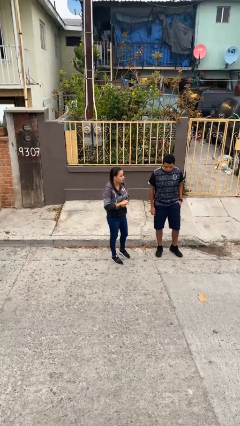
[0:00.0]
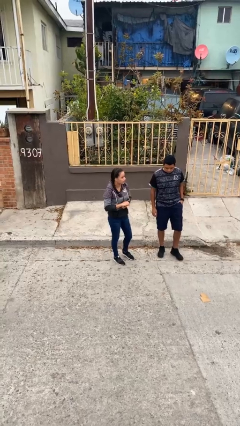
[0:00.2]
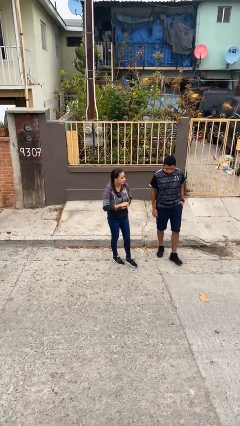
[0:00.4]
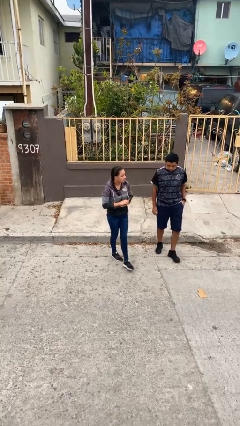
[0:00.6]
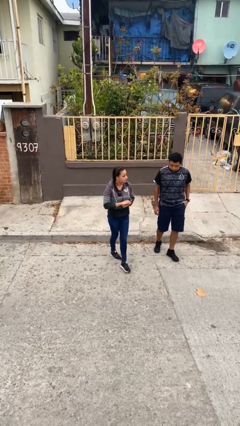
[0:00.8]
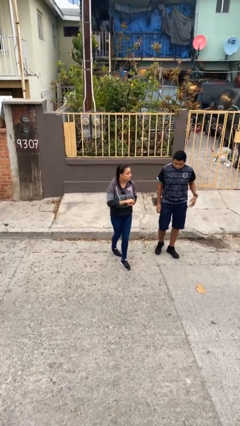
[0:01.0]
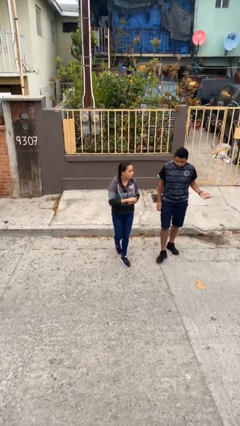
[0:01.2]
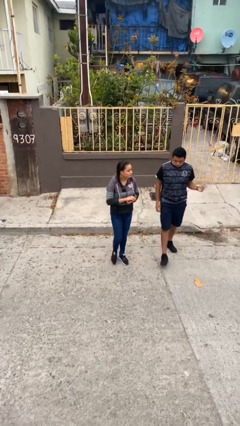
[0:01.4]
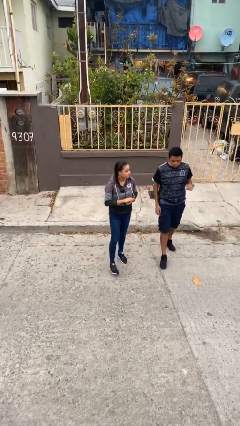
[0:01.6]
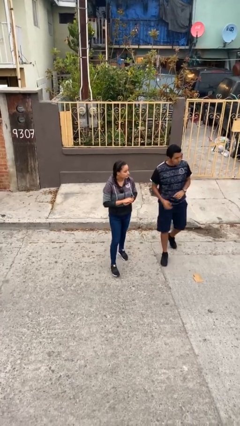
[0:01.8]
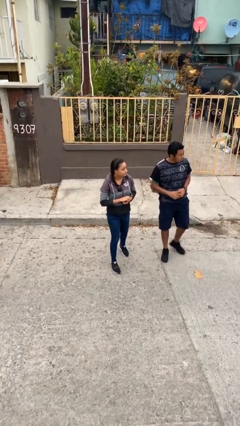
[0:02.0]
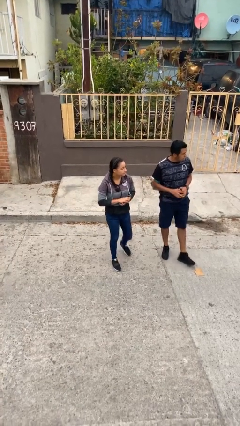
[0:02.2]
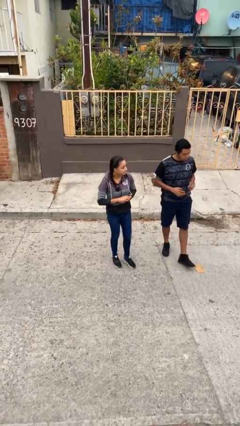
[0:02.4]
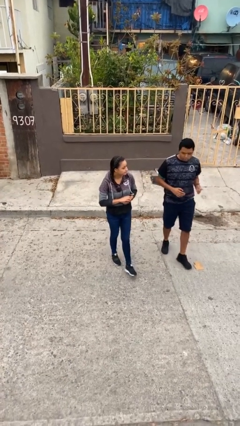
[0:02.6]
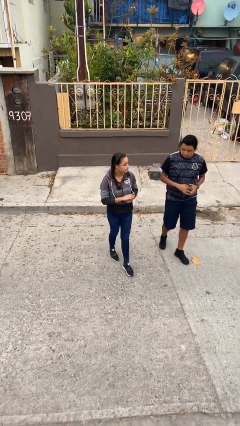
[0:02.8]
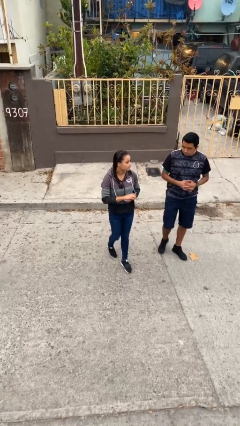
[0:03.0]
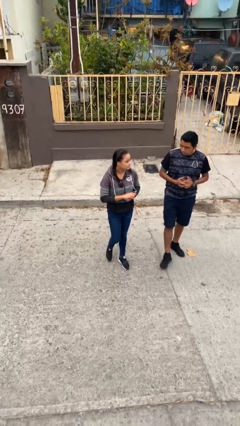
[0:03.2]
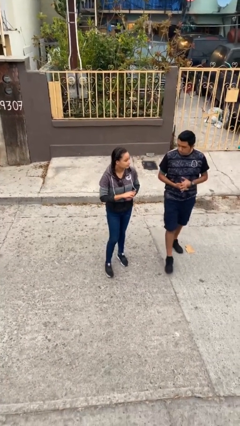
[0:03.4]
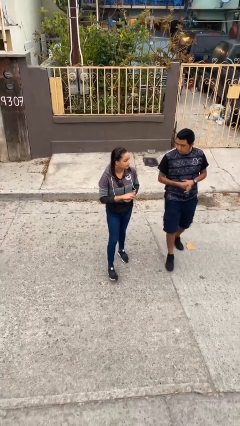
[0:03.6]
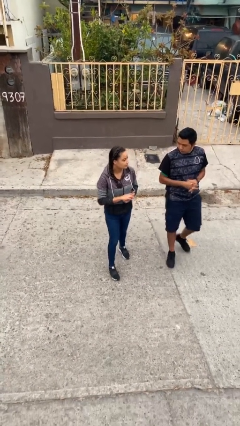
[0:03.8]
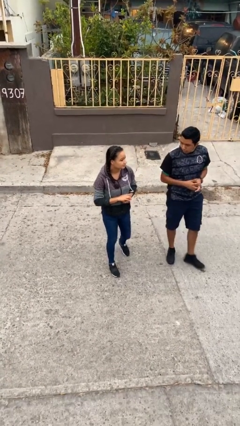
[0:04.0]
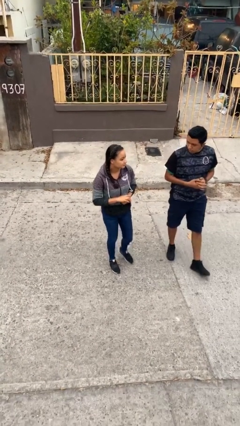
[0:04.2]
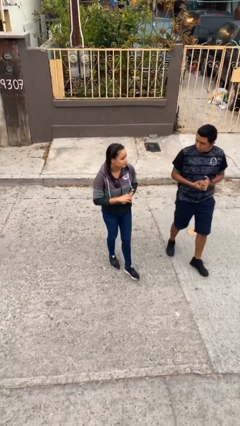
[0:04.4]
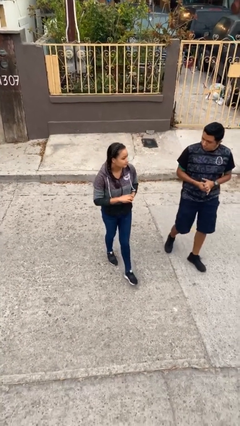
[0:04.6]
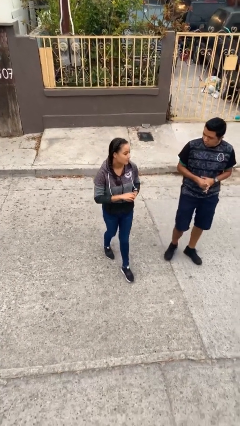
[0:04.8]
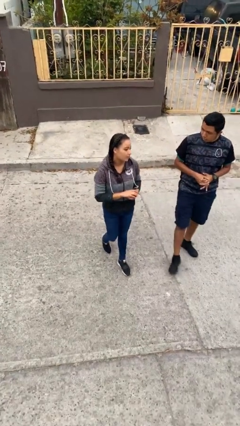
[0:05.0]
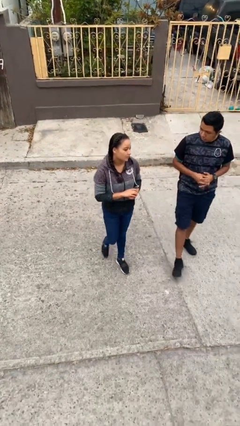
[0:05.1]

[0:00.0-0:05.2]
person talks to person

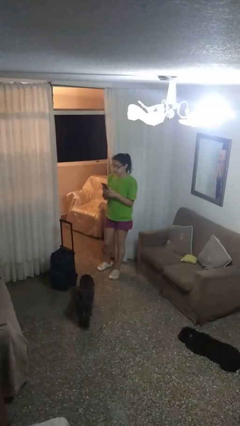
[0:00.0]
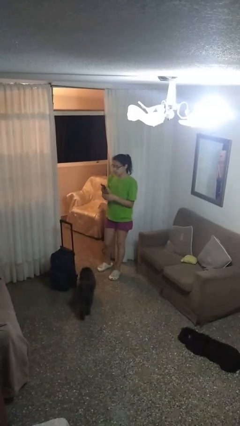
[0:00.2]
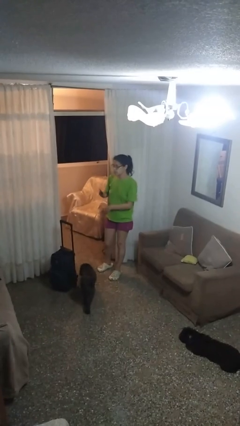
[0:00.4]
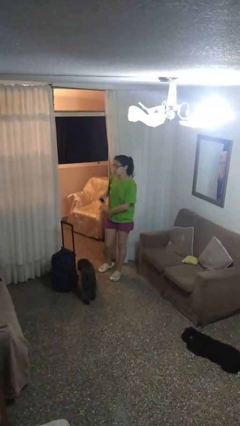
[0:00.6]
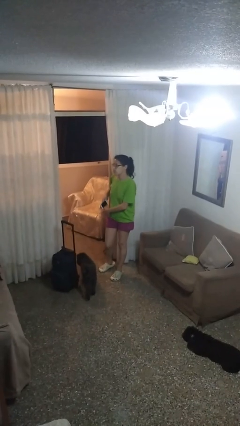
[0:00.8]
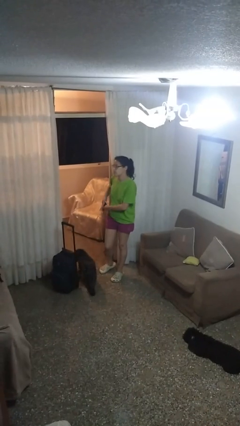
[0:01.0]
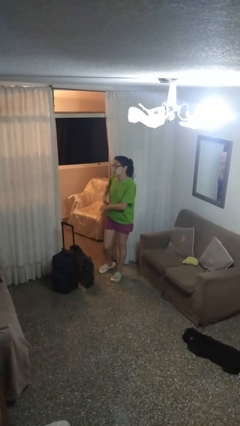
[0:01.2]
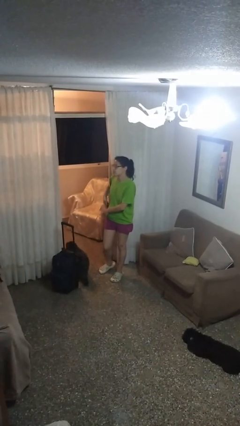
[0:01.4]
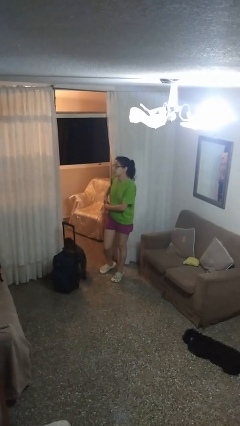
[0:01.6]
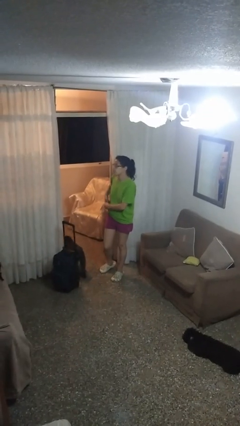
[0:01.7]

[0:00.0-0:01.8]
person puts phone into pocket

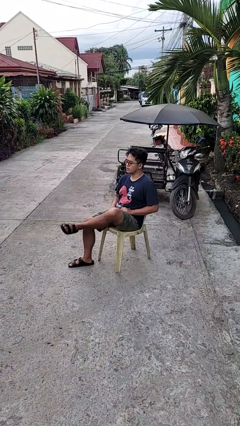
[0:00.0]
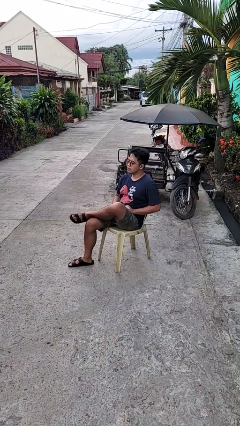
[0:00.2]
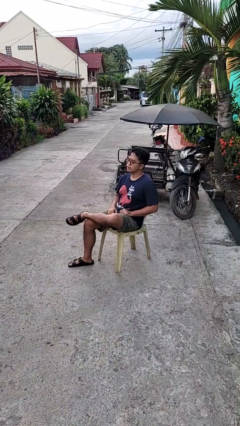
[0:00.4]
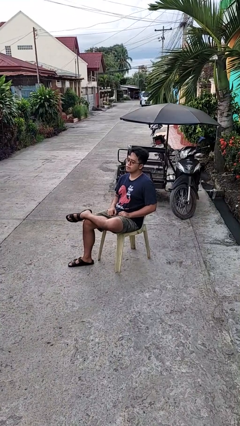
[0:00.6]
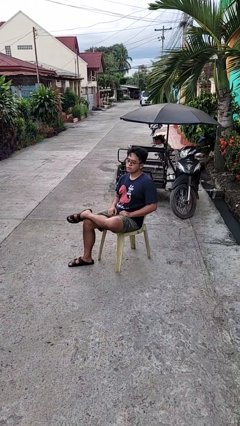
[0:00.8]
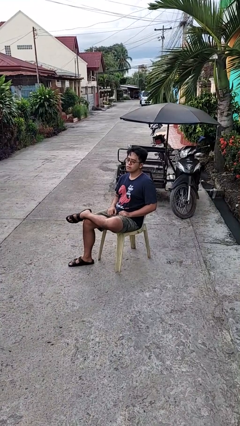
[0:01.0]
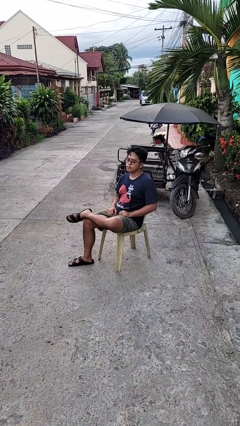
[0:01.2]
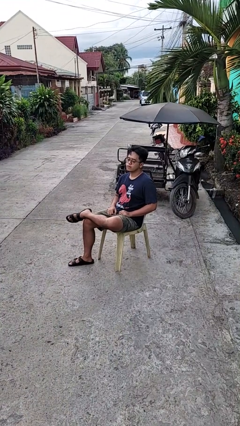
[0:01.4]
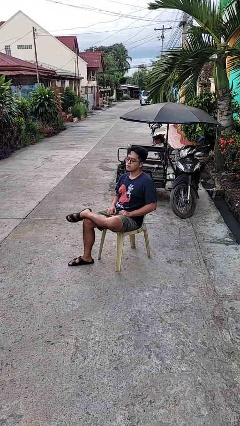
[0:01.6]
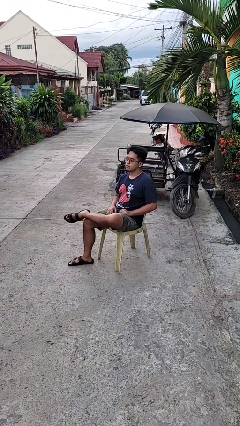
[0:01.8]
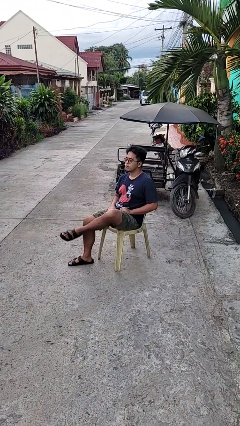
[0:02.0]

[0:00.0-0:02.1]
person crosses legs

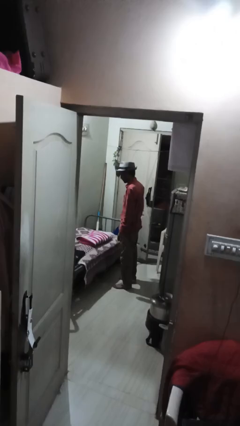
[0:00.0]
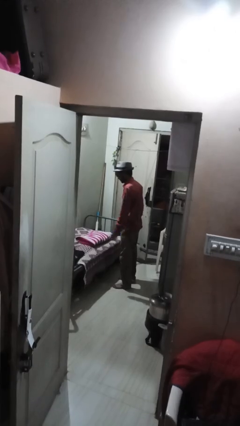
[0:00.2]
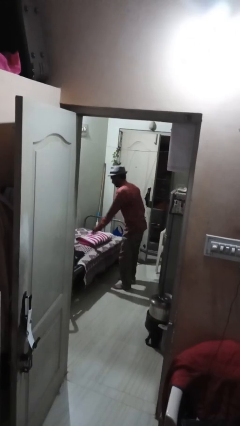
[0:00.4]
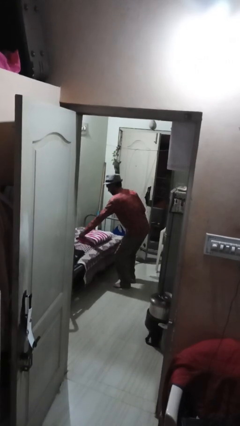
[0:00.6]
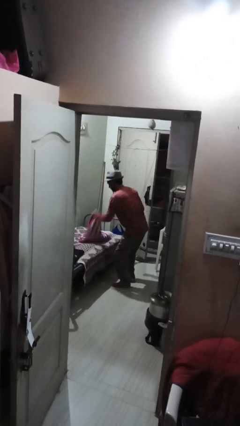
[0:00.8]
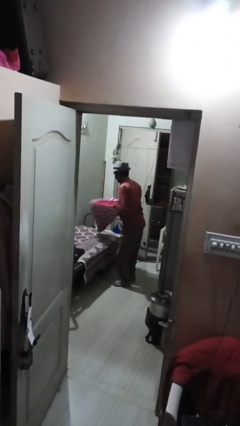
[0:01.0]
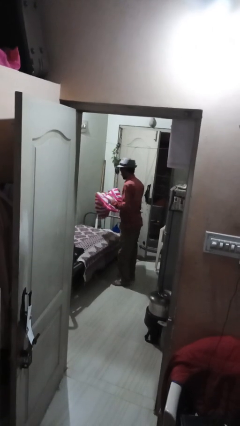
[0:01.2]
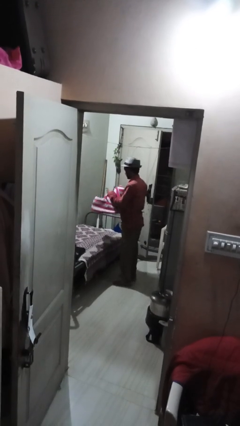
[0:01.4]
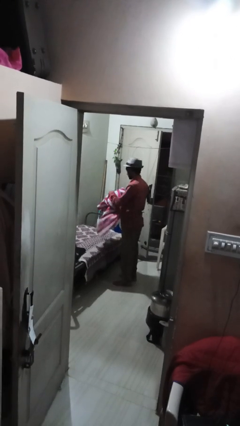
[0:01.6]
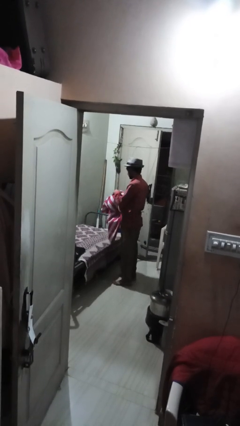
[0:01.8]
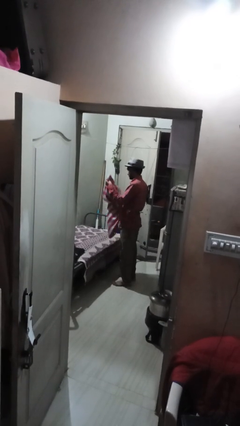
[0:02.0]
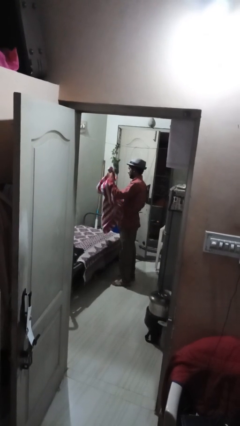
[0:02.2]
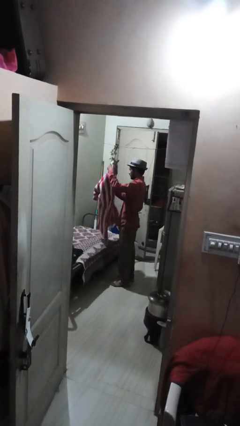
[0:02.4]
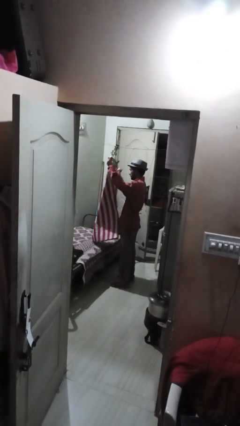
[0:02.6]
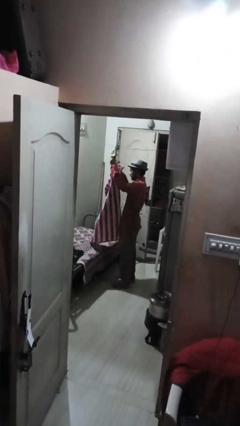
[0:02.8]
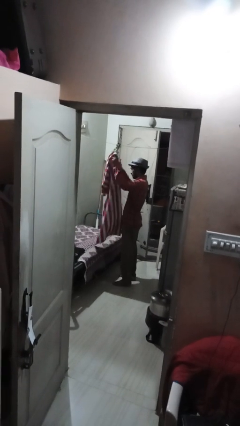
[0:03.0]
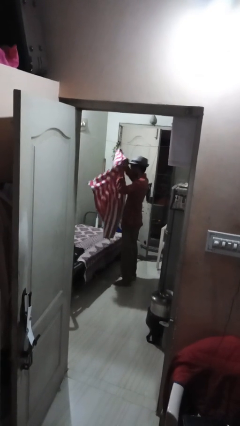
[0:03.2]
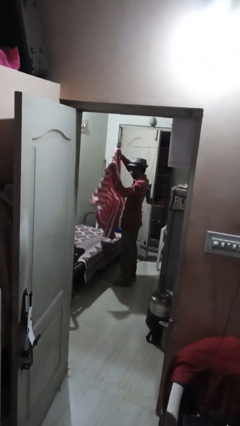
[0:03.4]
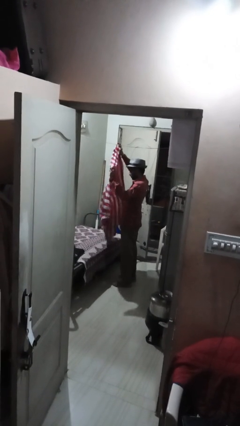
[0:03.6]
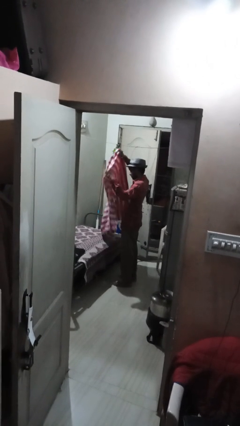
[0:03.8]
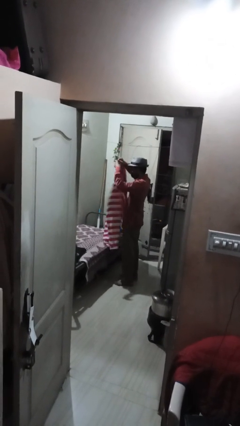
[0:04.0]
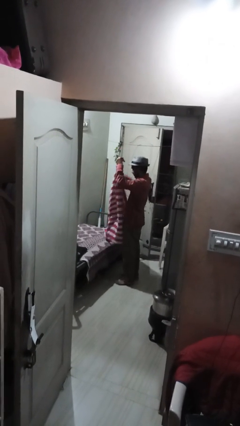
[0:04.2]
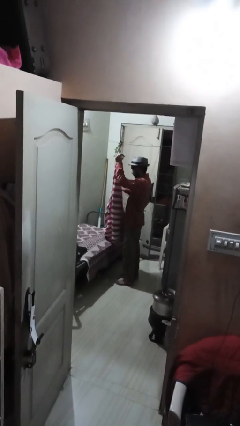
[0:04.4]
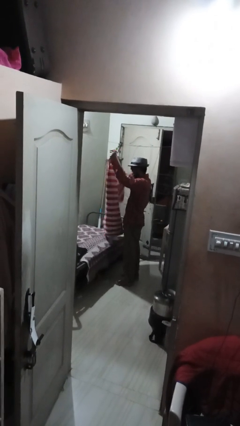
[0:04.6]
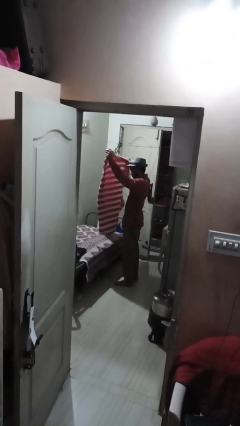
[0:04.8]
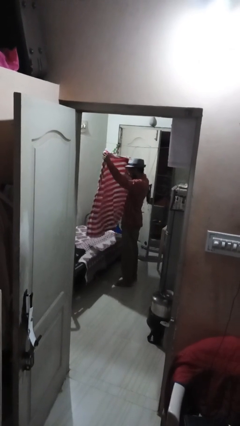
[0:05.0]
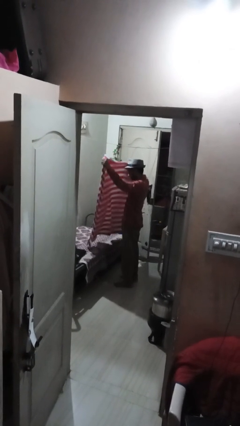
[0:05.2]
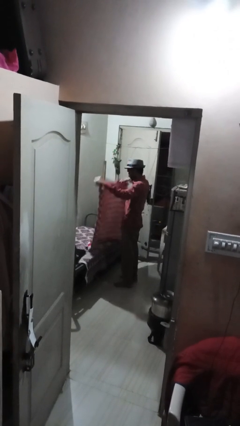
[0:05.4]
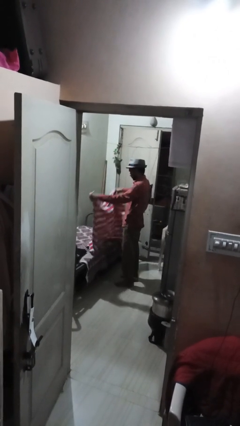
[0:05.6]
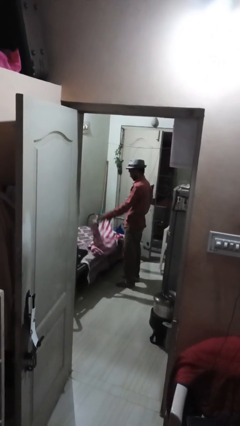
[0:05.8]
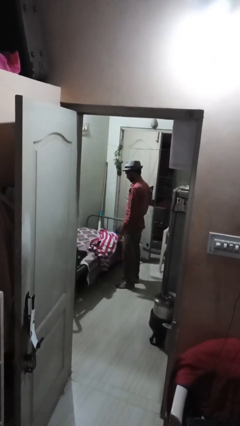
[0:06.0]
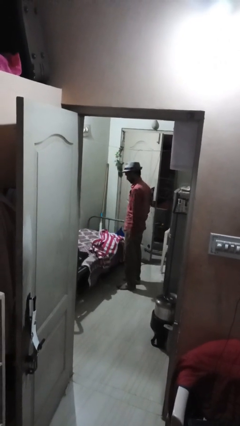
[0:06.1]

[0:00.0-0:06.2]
person unfolds blanket

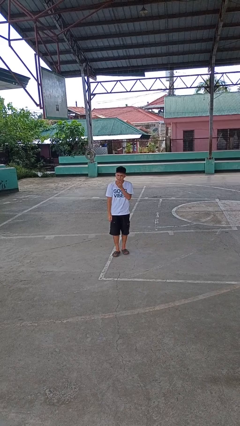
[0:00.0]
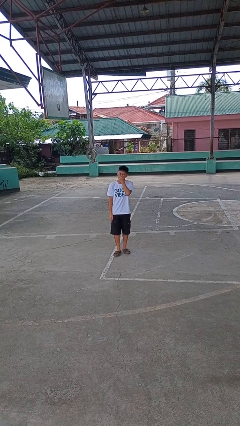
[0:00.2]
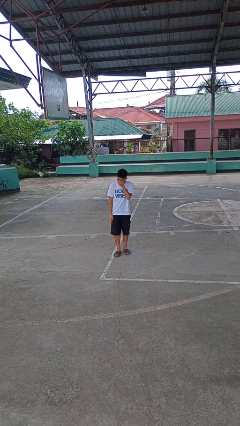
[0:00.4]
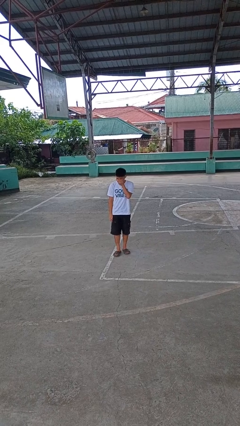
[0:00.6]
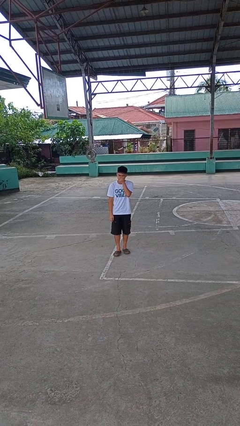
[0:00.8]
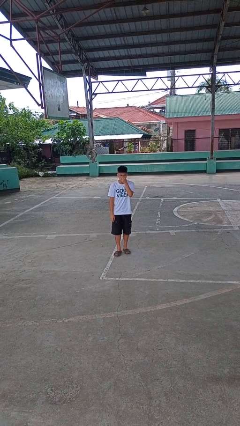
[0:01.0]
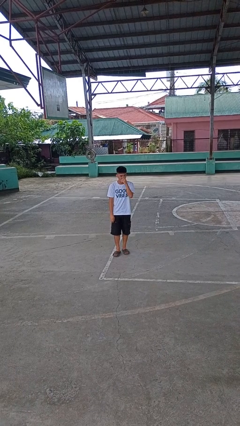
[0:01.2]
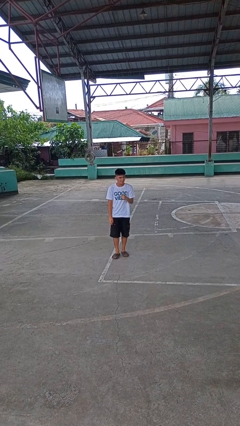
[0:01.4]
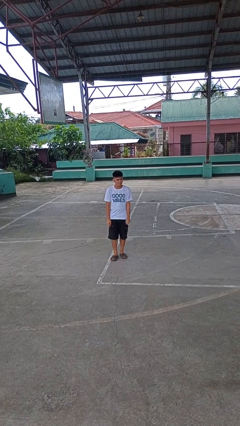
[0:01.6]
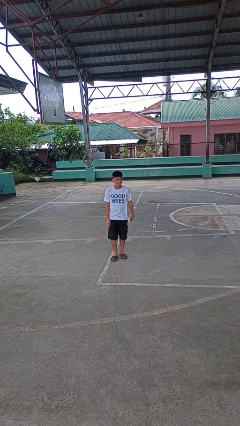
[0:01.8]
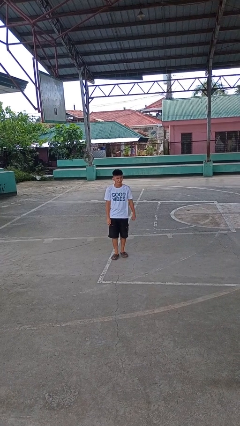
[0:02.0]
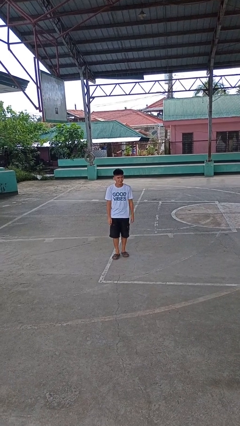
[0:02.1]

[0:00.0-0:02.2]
person sneezes into hand

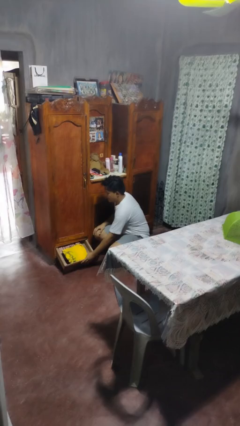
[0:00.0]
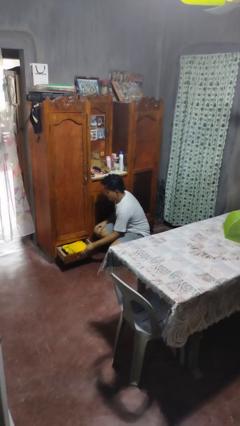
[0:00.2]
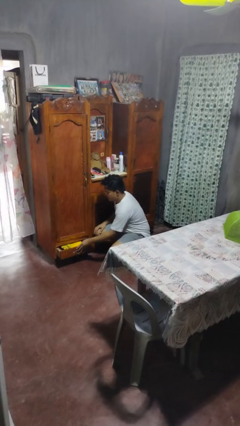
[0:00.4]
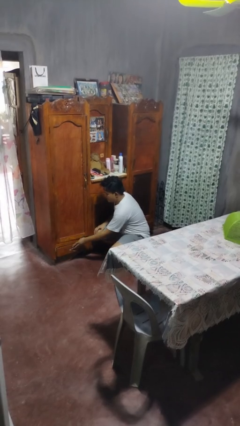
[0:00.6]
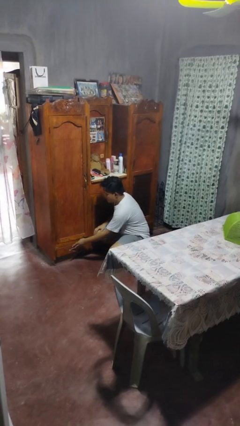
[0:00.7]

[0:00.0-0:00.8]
person closes dresser drawer
